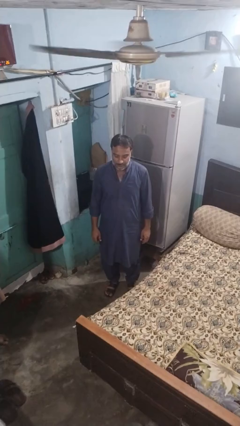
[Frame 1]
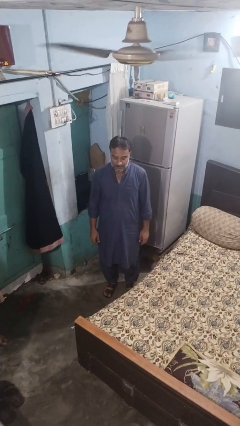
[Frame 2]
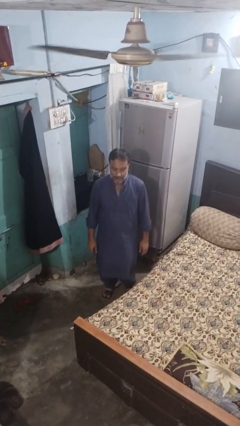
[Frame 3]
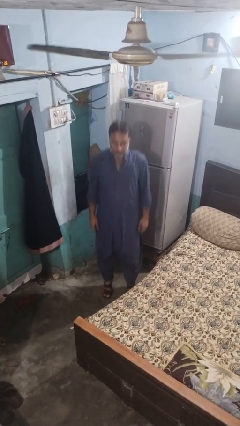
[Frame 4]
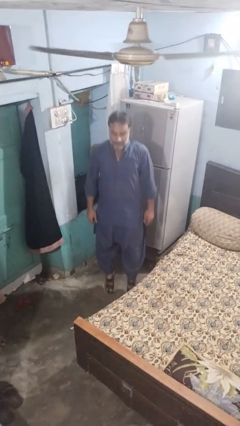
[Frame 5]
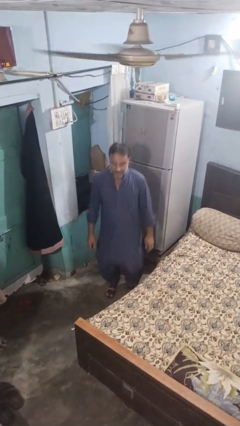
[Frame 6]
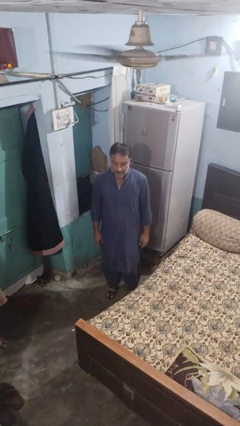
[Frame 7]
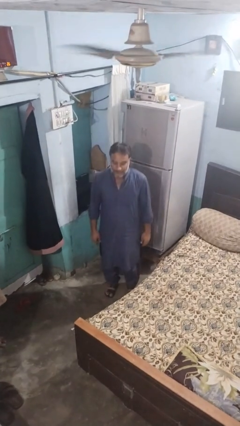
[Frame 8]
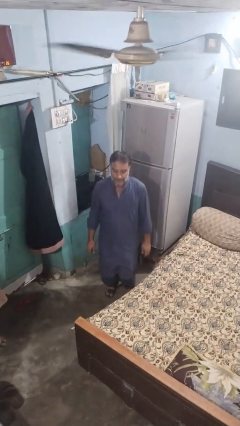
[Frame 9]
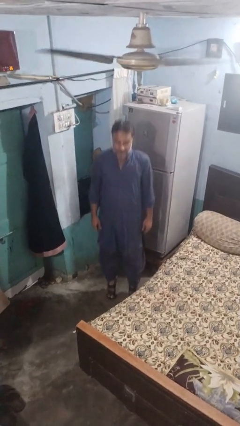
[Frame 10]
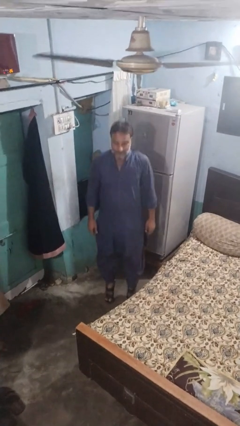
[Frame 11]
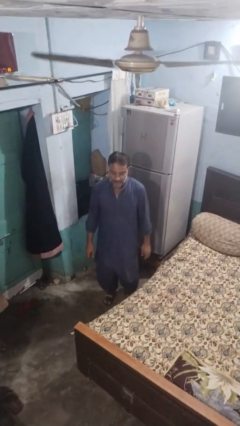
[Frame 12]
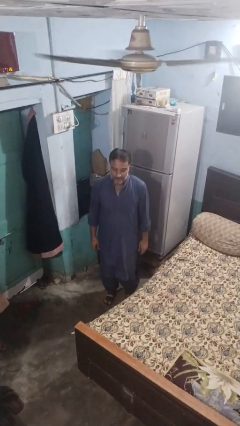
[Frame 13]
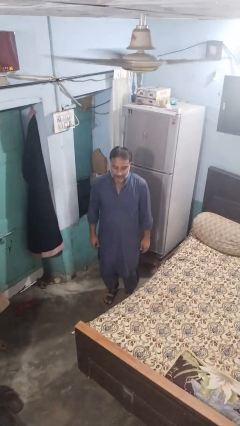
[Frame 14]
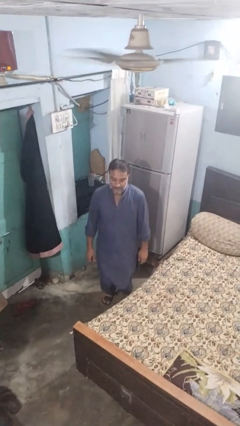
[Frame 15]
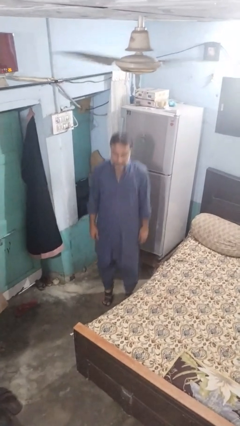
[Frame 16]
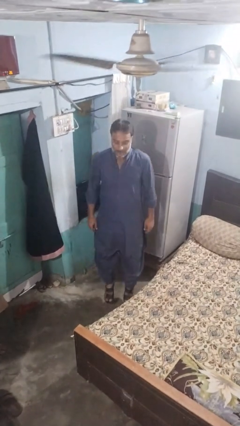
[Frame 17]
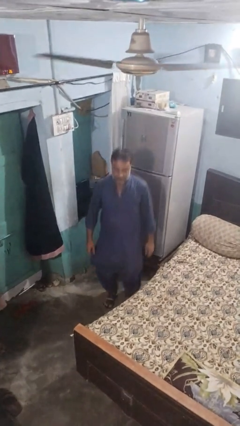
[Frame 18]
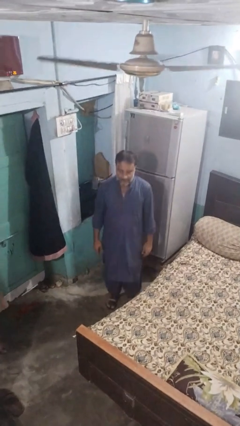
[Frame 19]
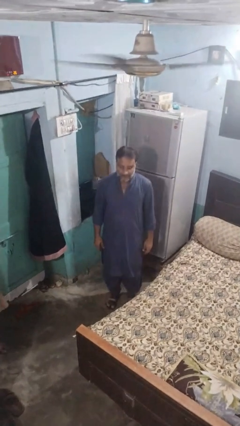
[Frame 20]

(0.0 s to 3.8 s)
person jumps

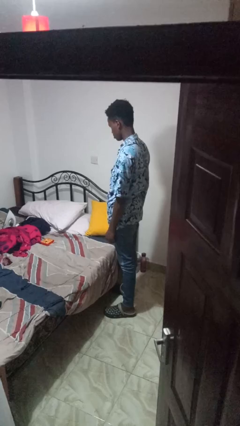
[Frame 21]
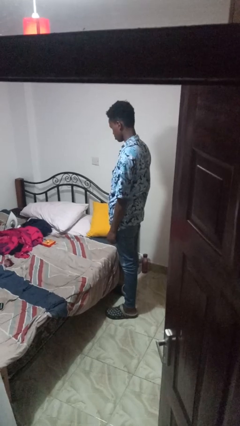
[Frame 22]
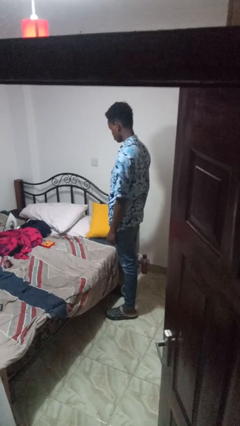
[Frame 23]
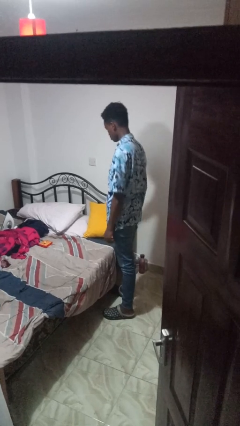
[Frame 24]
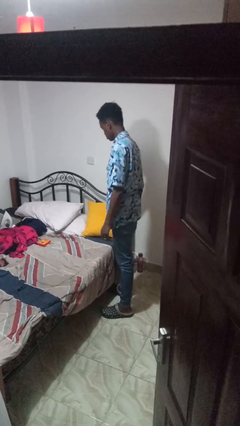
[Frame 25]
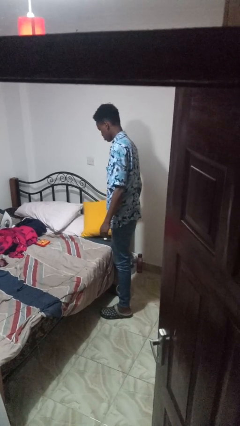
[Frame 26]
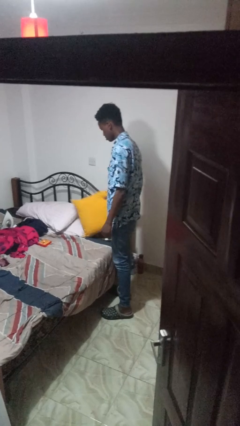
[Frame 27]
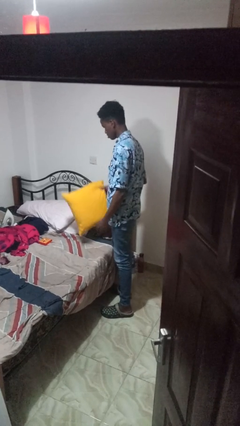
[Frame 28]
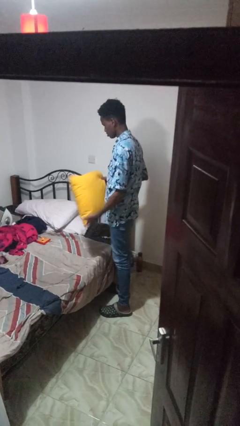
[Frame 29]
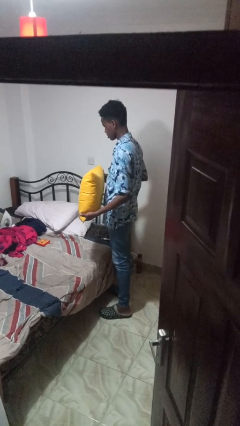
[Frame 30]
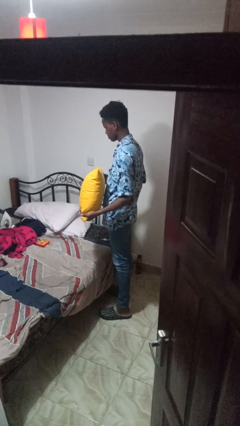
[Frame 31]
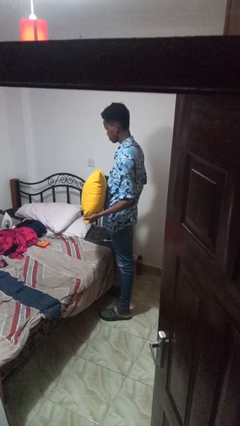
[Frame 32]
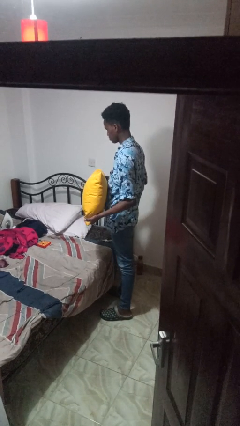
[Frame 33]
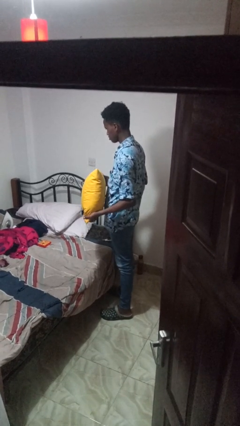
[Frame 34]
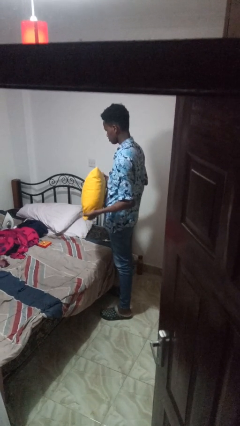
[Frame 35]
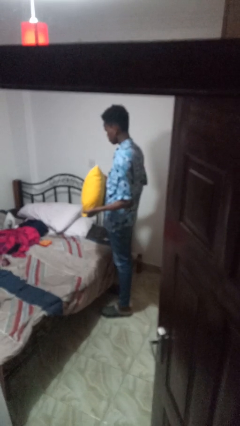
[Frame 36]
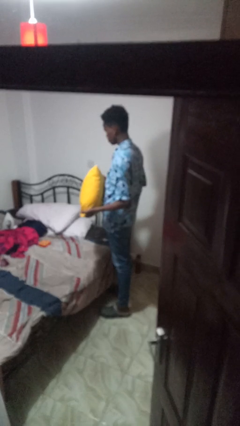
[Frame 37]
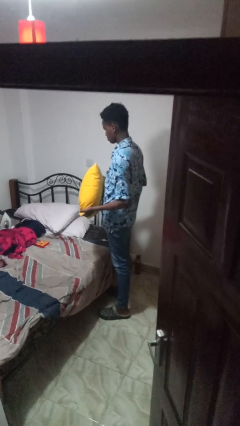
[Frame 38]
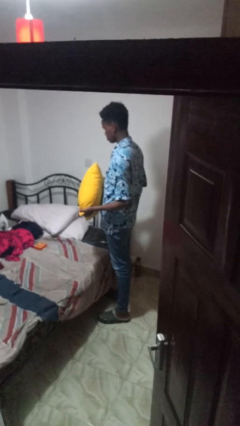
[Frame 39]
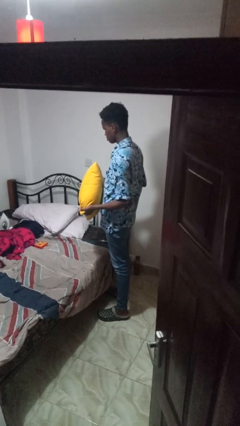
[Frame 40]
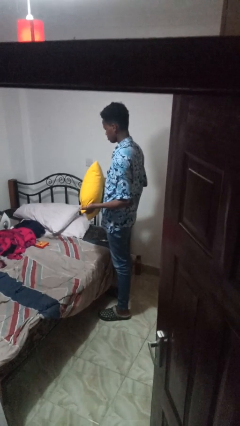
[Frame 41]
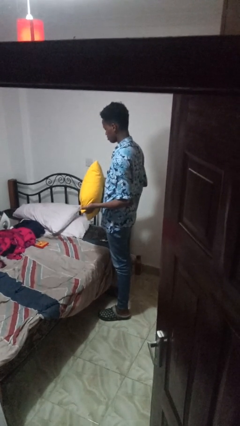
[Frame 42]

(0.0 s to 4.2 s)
person picks up object from bed

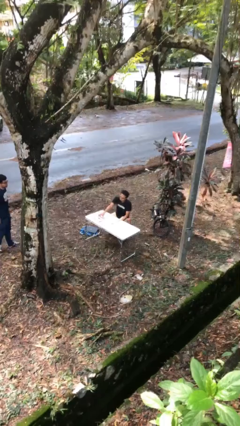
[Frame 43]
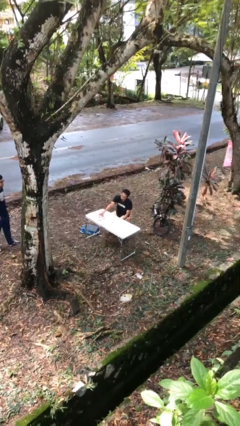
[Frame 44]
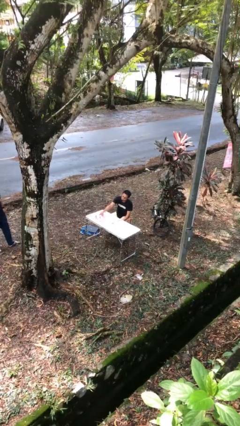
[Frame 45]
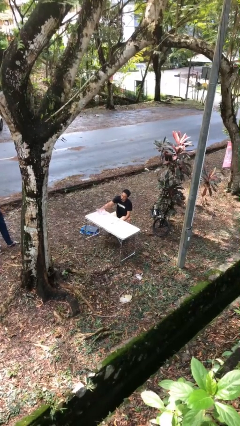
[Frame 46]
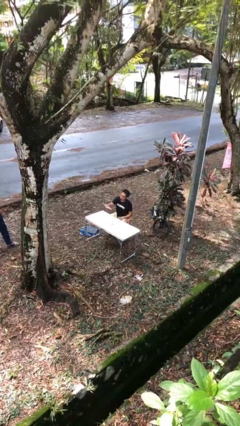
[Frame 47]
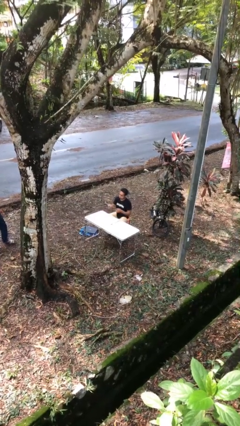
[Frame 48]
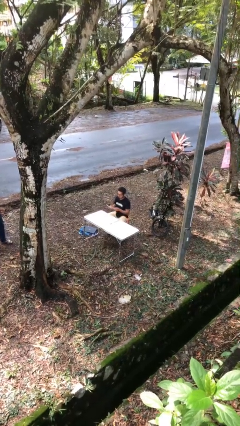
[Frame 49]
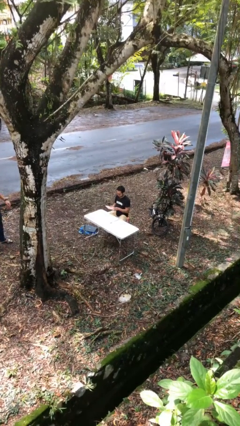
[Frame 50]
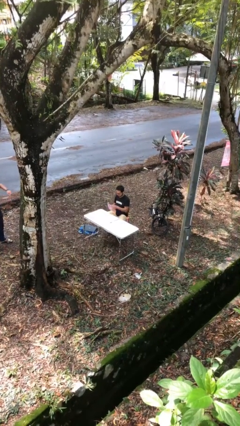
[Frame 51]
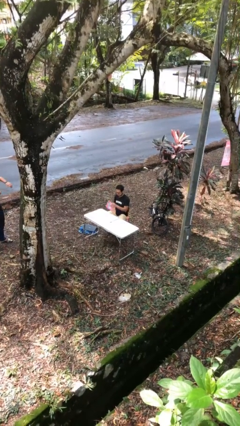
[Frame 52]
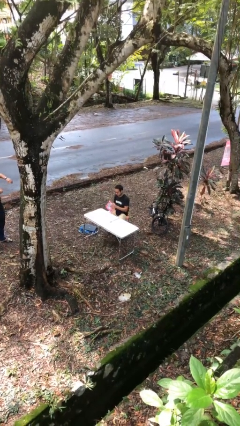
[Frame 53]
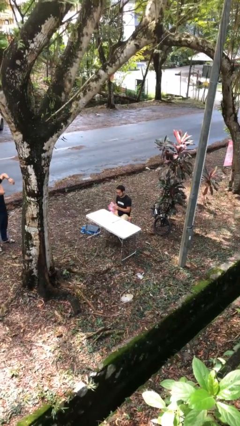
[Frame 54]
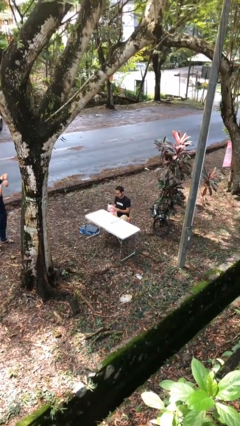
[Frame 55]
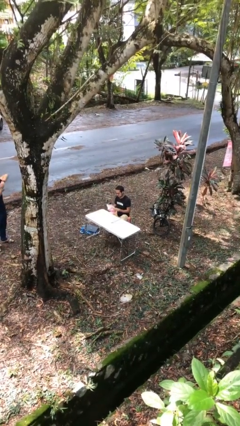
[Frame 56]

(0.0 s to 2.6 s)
person picks up object from table

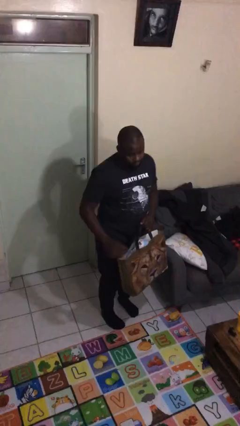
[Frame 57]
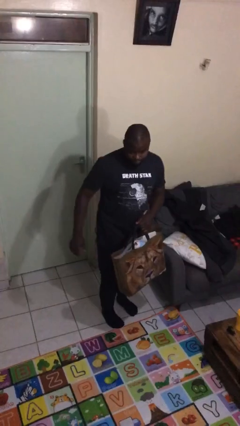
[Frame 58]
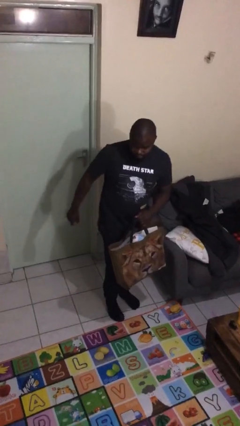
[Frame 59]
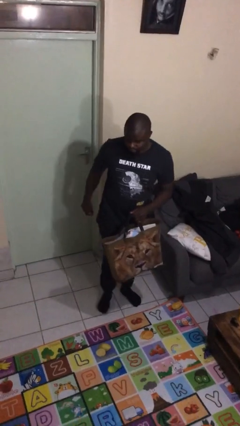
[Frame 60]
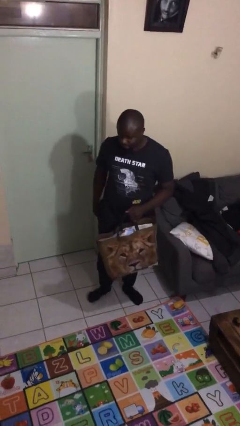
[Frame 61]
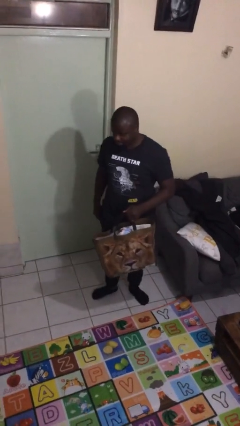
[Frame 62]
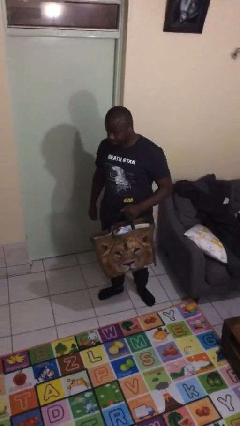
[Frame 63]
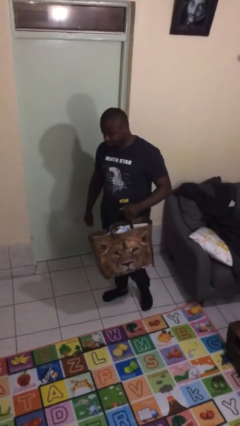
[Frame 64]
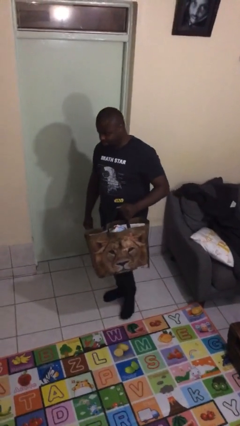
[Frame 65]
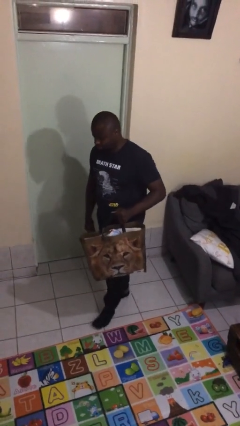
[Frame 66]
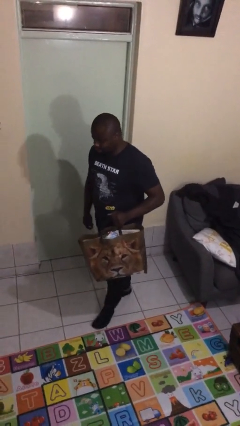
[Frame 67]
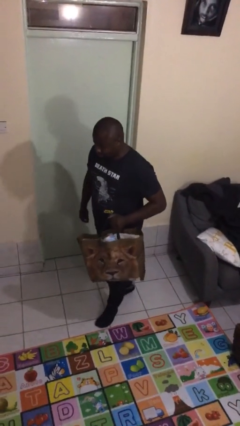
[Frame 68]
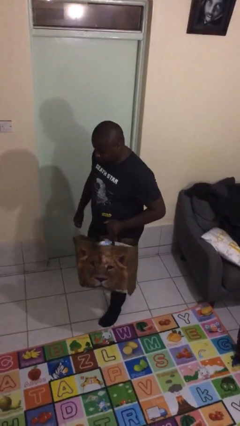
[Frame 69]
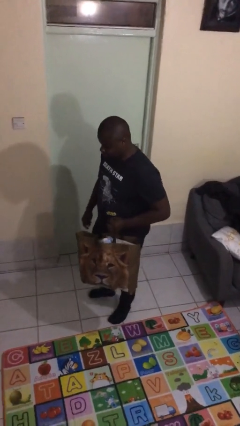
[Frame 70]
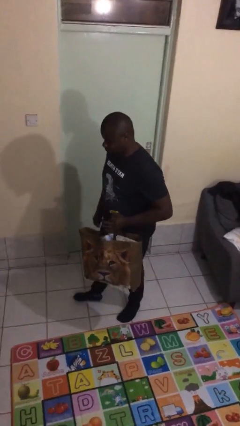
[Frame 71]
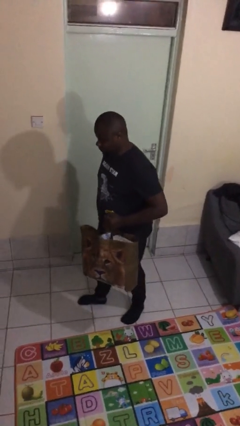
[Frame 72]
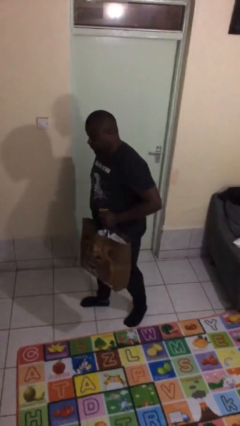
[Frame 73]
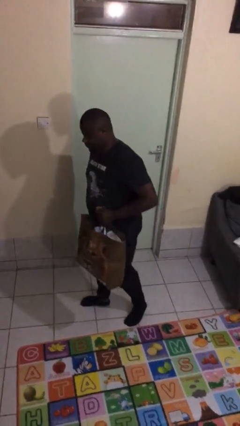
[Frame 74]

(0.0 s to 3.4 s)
person carries groceries

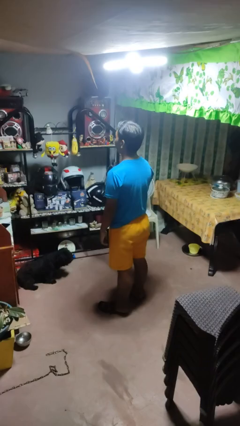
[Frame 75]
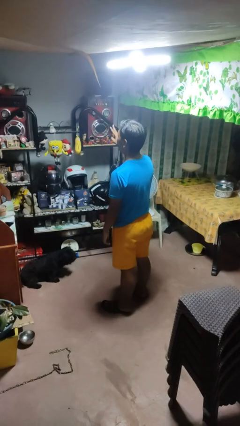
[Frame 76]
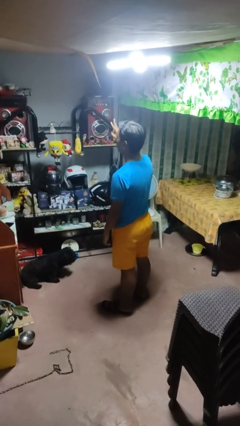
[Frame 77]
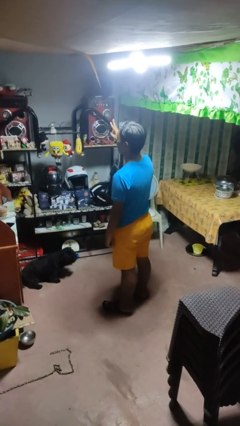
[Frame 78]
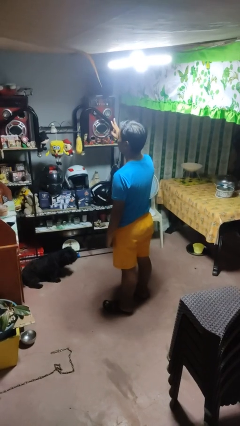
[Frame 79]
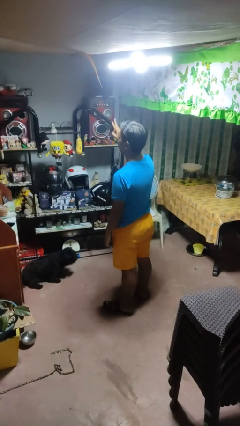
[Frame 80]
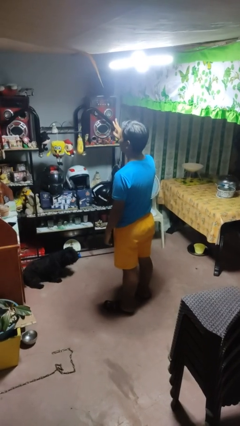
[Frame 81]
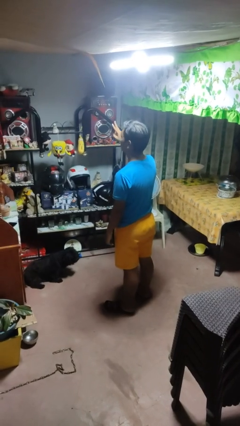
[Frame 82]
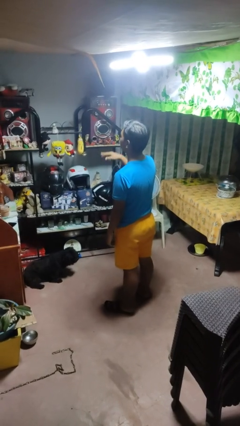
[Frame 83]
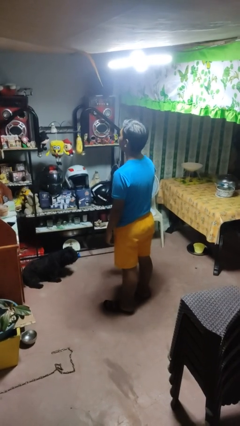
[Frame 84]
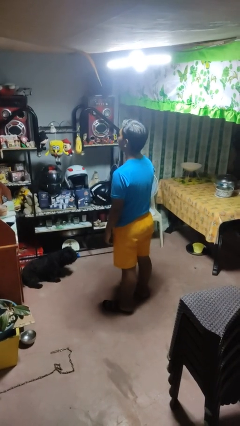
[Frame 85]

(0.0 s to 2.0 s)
person gestures peace

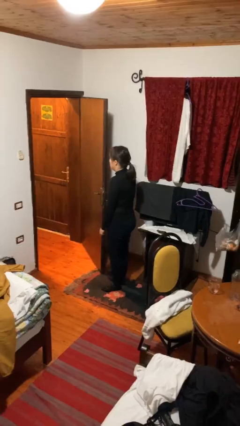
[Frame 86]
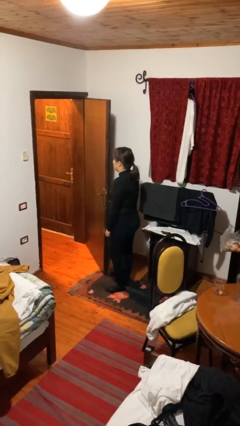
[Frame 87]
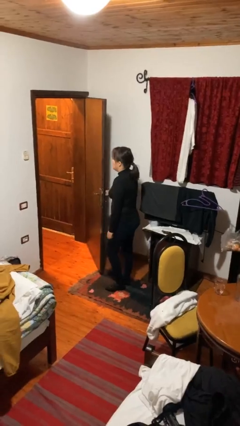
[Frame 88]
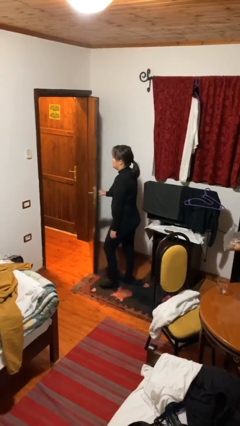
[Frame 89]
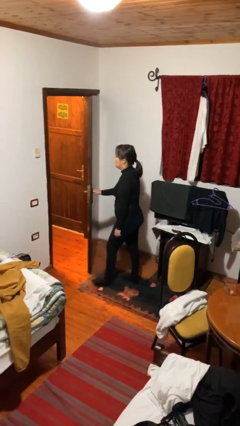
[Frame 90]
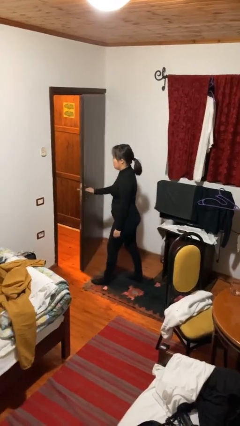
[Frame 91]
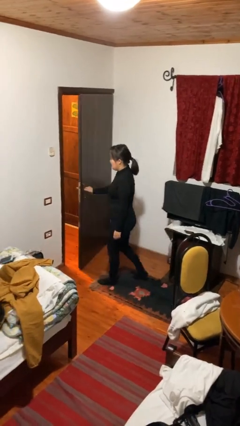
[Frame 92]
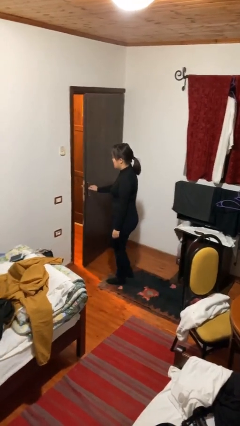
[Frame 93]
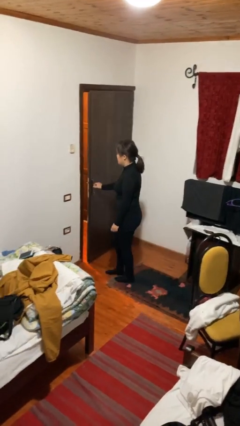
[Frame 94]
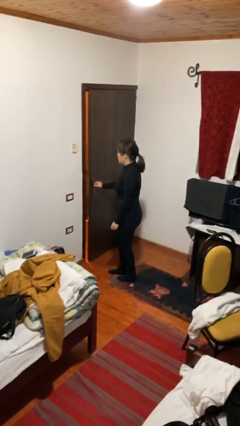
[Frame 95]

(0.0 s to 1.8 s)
person closes facility door
